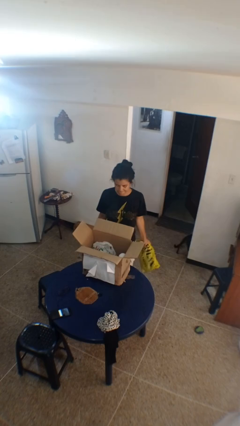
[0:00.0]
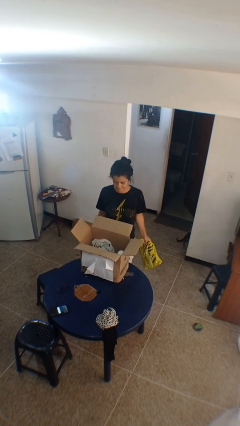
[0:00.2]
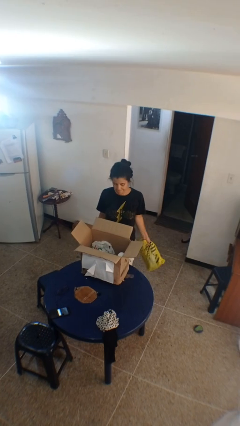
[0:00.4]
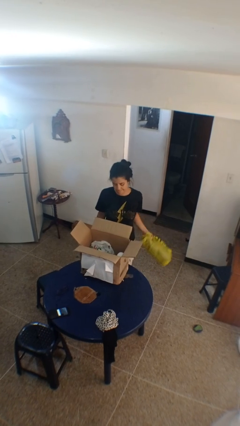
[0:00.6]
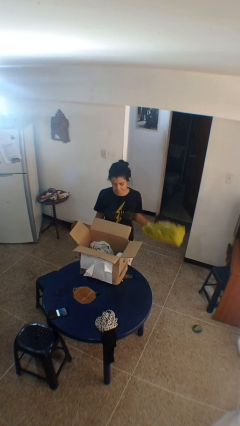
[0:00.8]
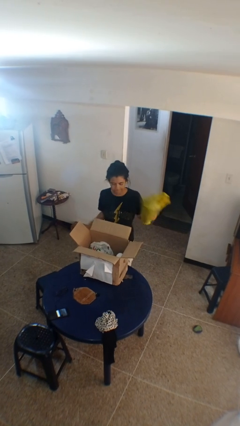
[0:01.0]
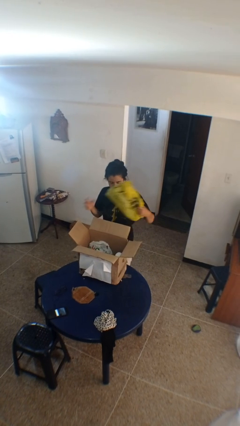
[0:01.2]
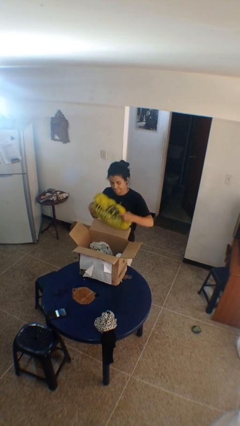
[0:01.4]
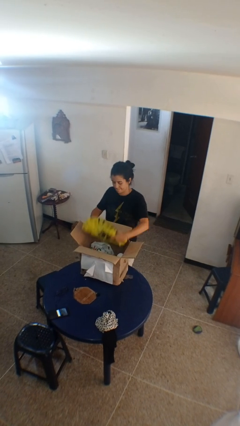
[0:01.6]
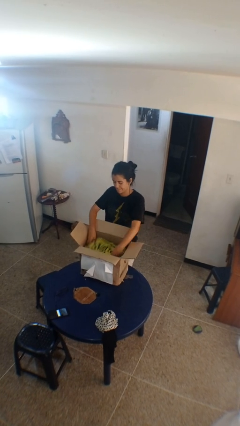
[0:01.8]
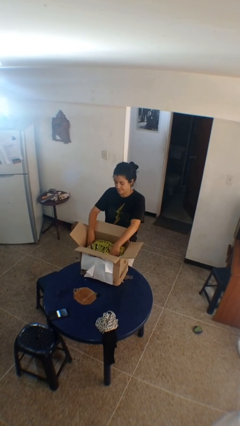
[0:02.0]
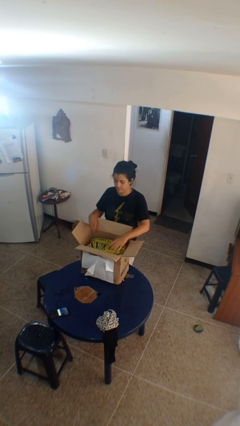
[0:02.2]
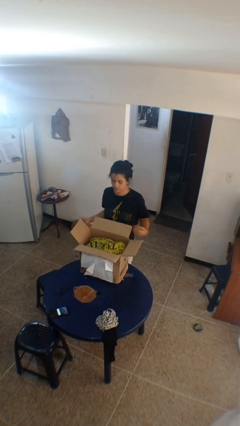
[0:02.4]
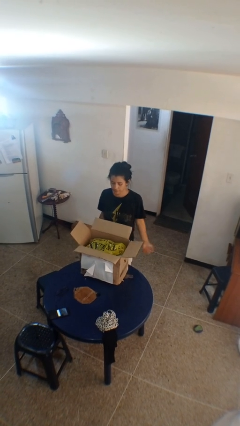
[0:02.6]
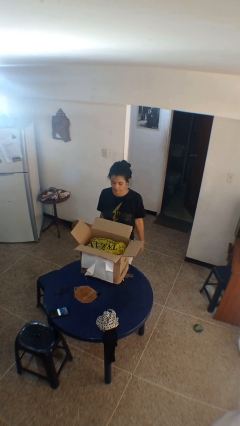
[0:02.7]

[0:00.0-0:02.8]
person puts object into box

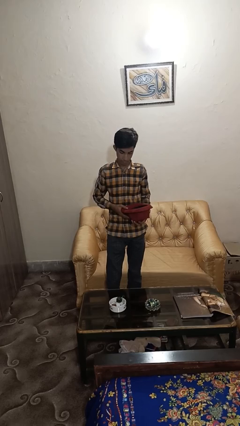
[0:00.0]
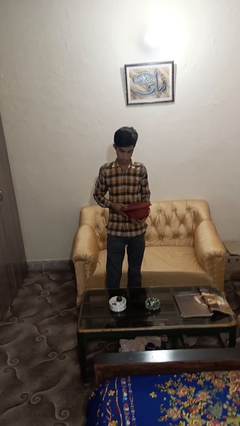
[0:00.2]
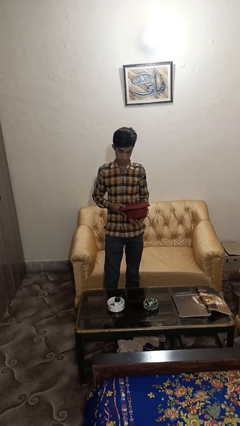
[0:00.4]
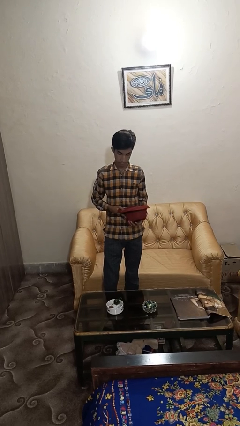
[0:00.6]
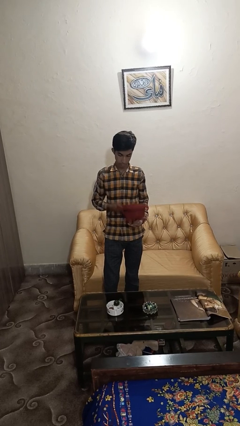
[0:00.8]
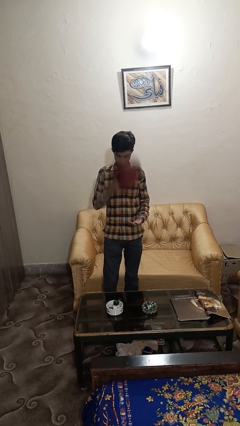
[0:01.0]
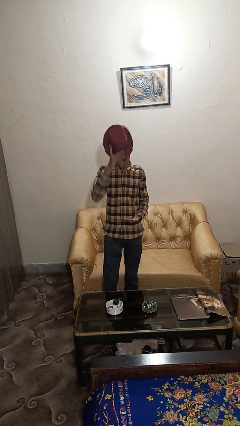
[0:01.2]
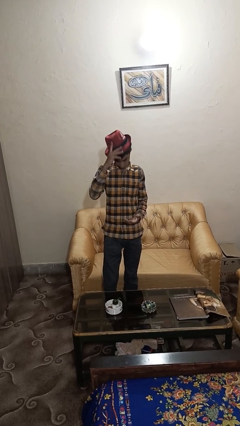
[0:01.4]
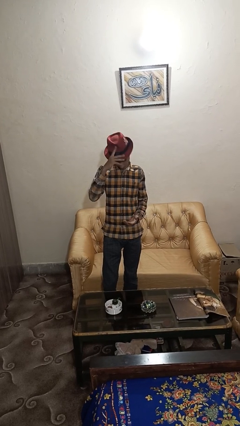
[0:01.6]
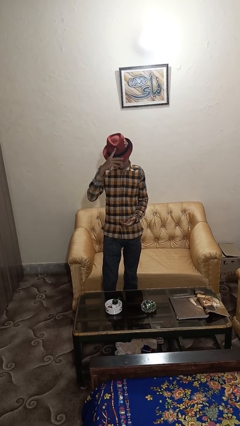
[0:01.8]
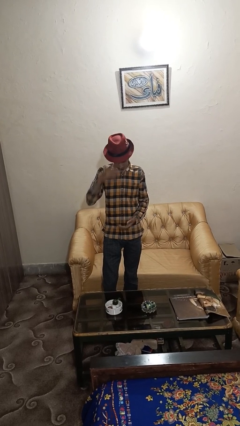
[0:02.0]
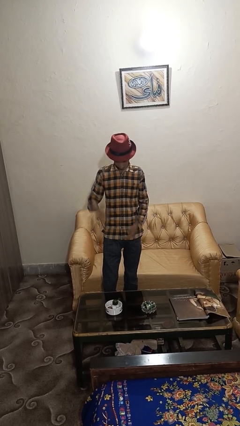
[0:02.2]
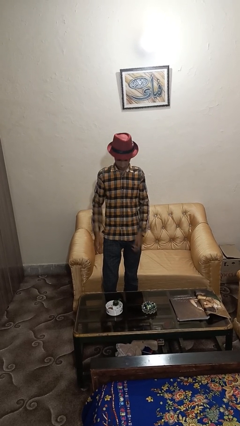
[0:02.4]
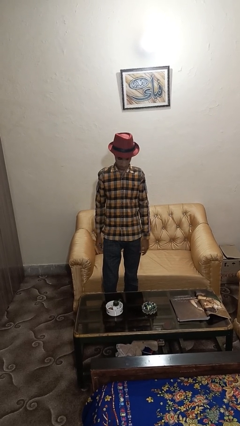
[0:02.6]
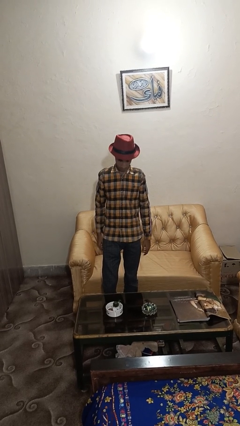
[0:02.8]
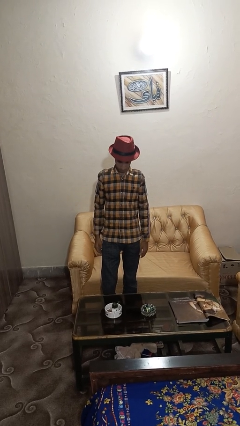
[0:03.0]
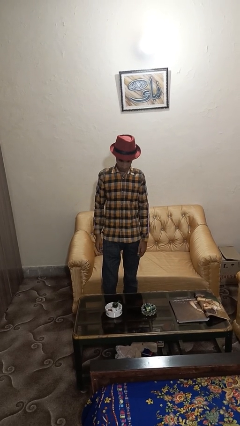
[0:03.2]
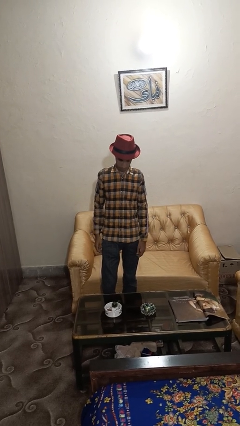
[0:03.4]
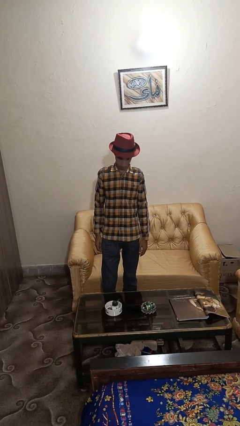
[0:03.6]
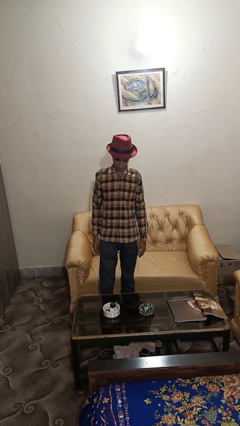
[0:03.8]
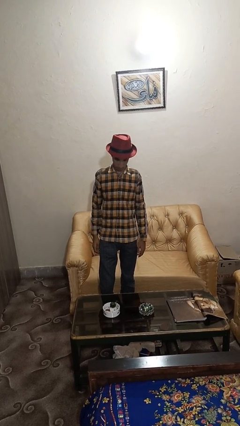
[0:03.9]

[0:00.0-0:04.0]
person puts on hat

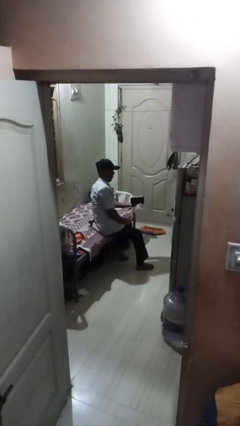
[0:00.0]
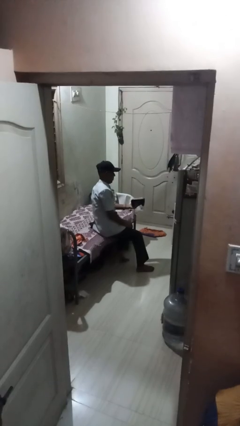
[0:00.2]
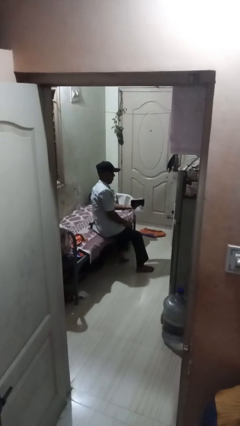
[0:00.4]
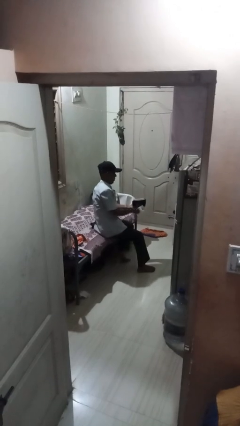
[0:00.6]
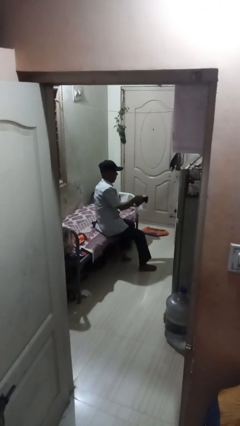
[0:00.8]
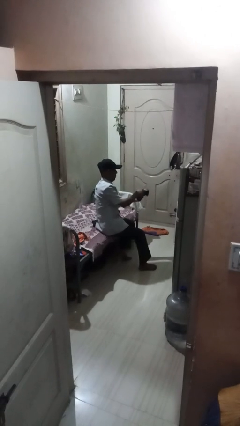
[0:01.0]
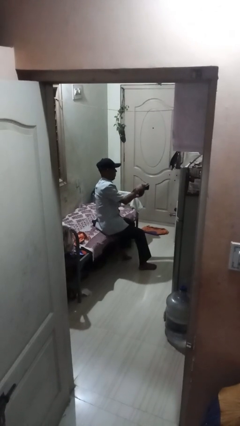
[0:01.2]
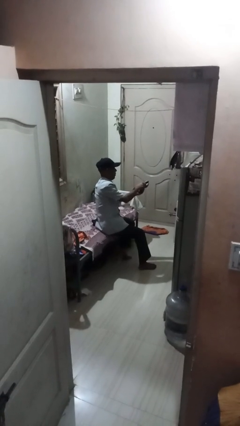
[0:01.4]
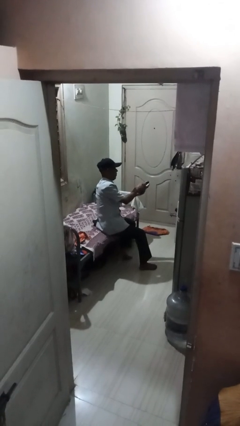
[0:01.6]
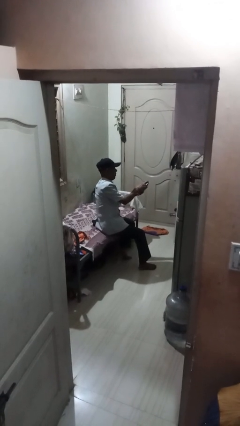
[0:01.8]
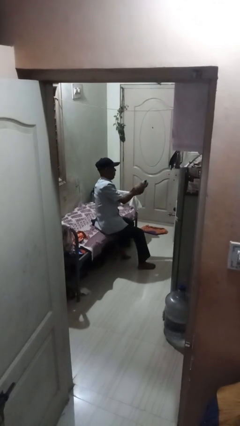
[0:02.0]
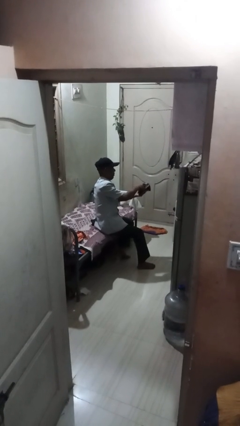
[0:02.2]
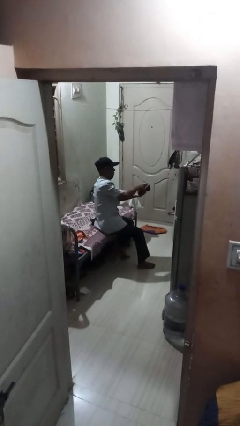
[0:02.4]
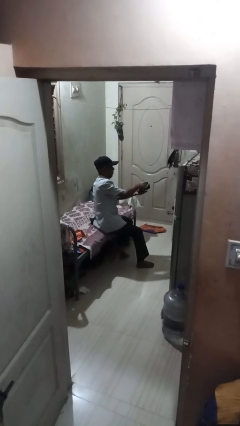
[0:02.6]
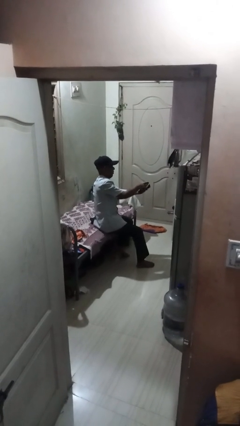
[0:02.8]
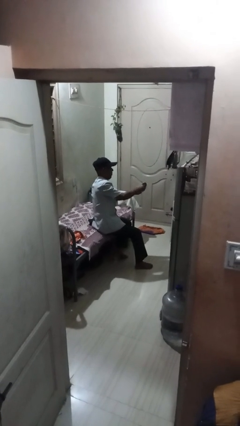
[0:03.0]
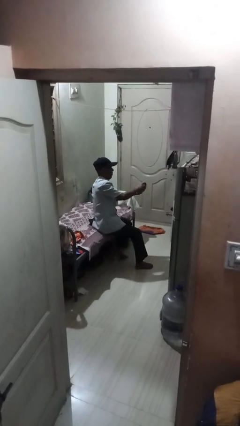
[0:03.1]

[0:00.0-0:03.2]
person searches in purse

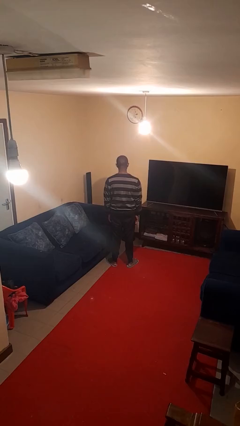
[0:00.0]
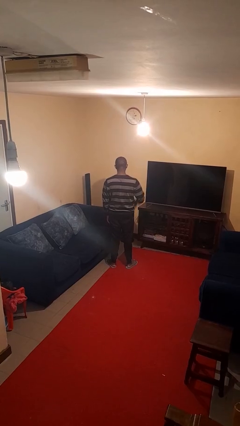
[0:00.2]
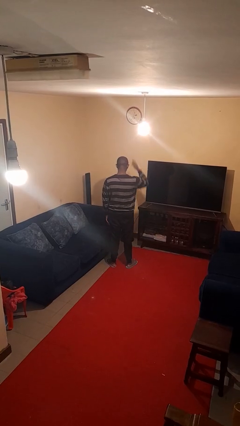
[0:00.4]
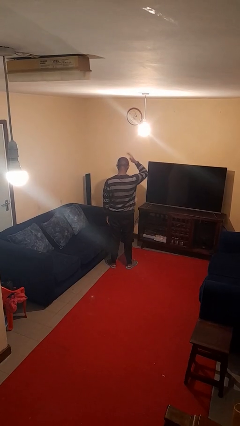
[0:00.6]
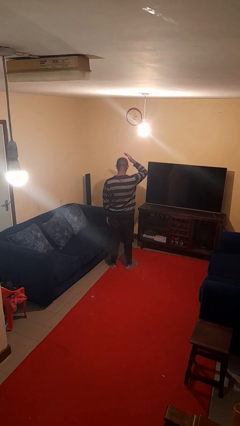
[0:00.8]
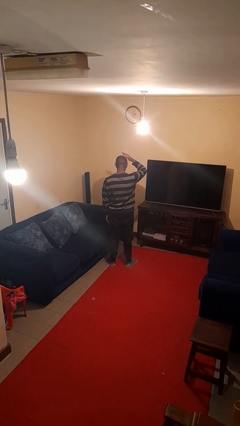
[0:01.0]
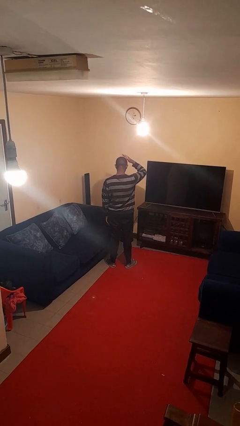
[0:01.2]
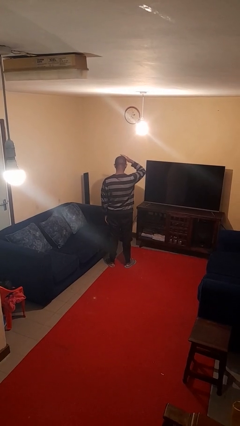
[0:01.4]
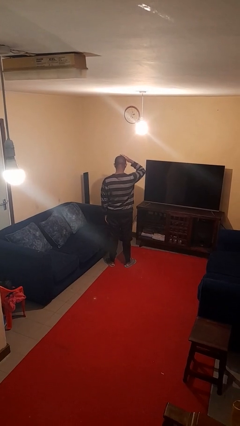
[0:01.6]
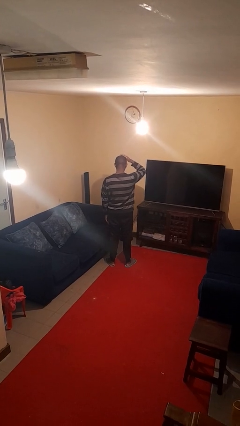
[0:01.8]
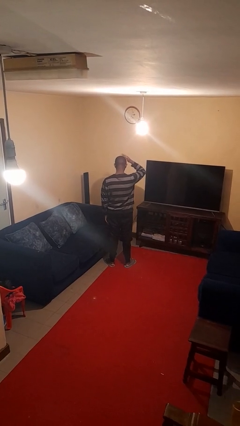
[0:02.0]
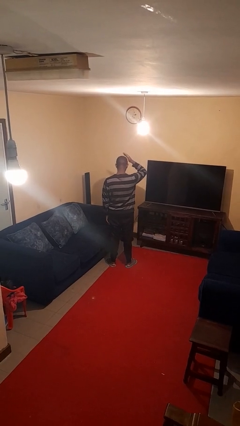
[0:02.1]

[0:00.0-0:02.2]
person pats head

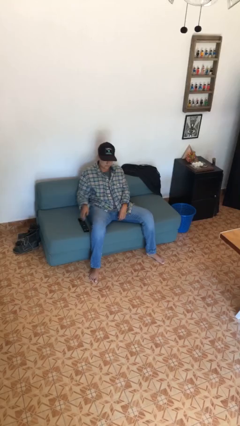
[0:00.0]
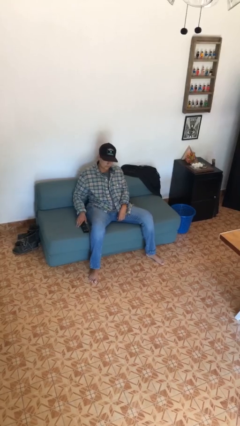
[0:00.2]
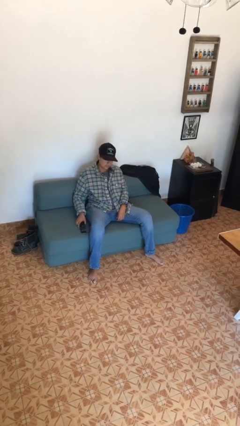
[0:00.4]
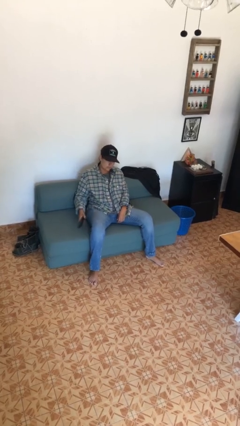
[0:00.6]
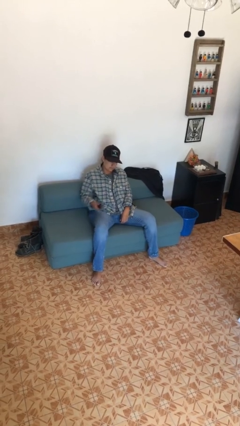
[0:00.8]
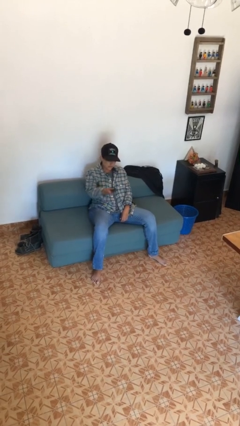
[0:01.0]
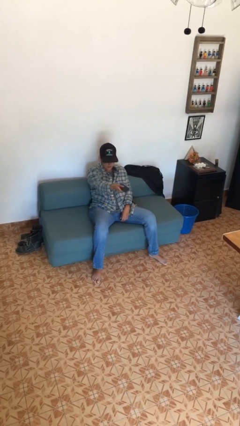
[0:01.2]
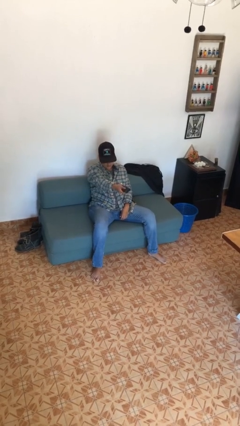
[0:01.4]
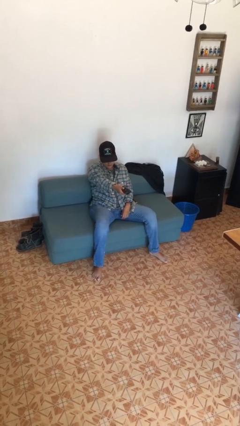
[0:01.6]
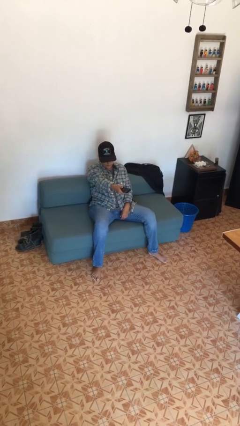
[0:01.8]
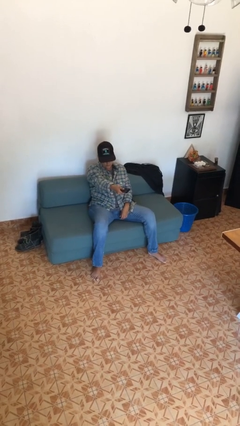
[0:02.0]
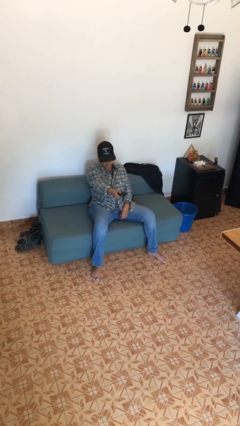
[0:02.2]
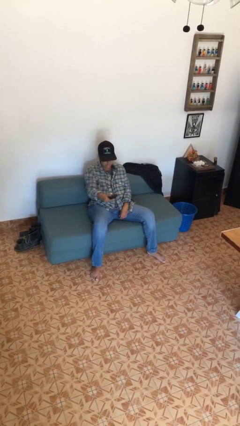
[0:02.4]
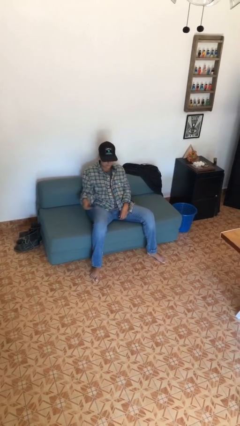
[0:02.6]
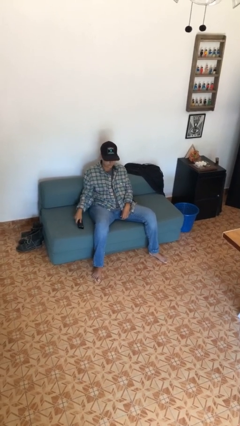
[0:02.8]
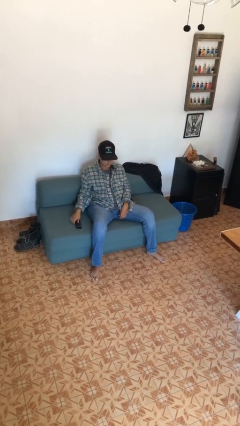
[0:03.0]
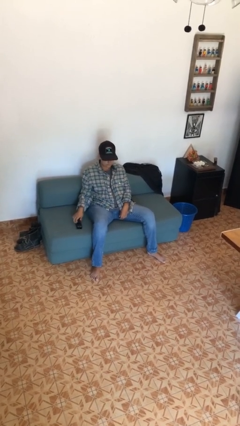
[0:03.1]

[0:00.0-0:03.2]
person uses television remote

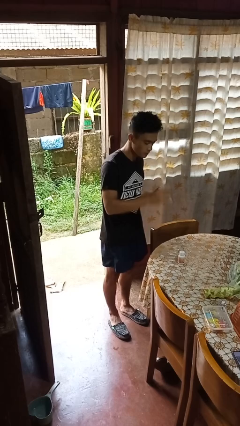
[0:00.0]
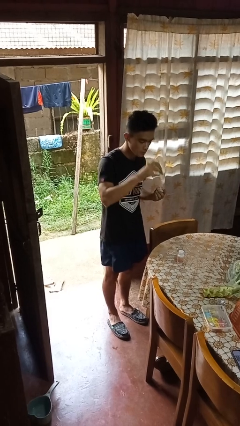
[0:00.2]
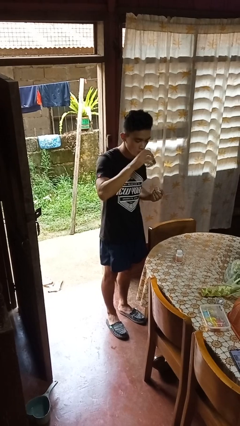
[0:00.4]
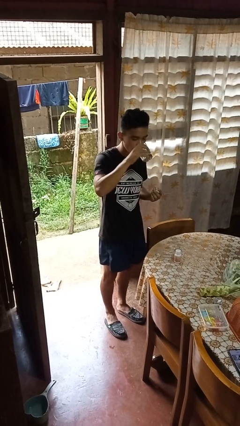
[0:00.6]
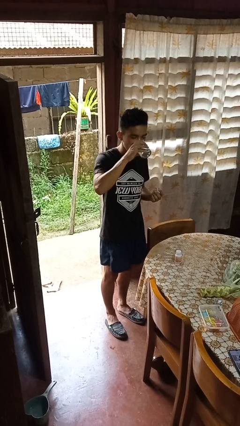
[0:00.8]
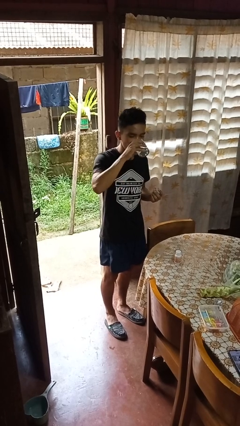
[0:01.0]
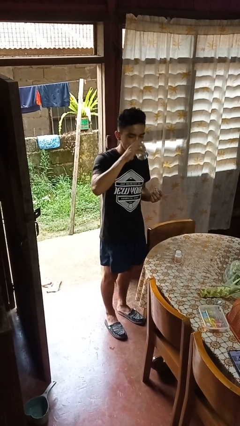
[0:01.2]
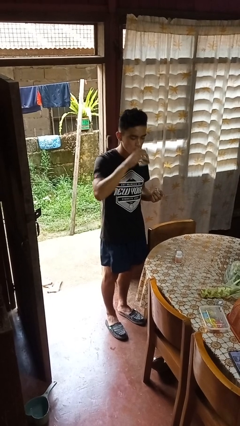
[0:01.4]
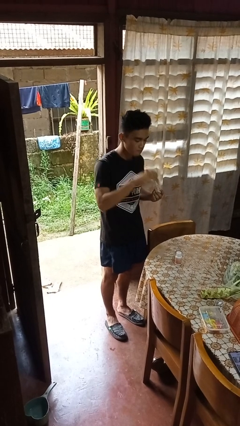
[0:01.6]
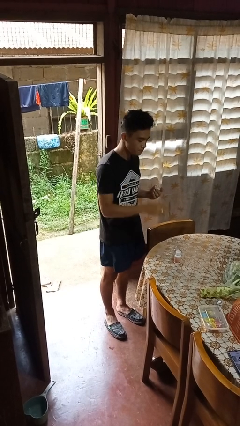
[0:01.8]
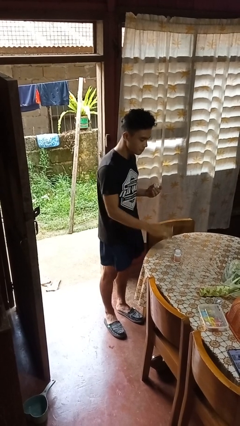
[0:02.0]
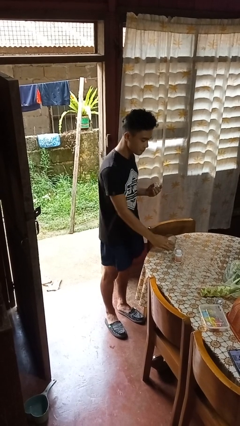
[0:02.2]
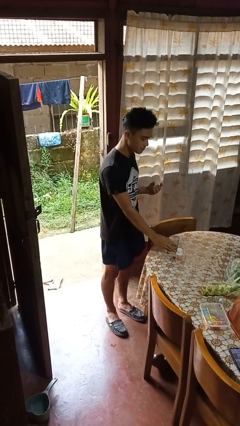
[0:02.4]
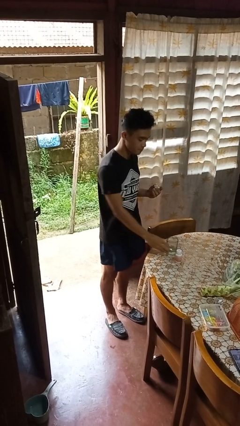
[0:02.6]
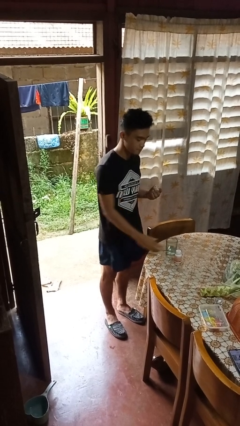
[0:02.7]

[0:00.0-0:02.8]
person drinks from cup
